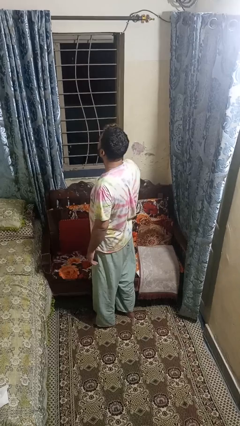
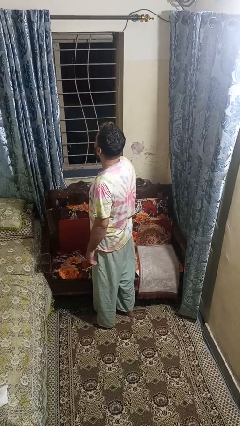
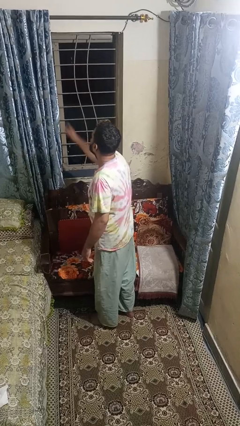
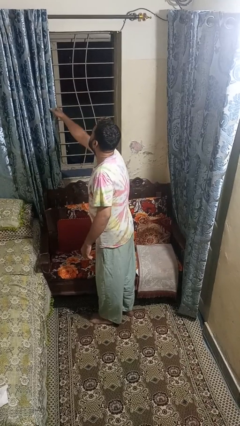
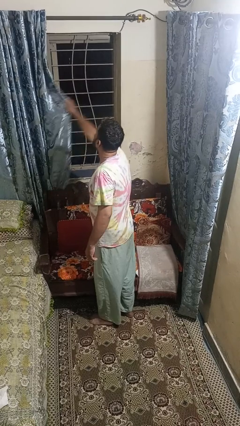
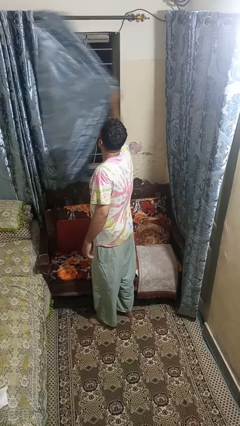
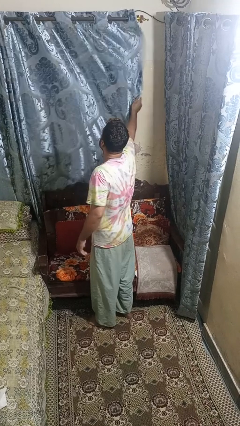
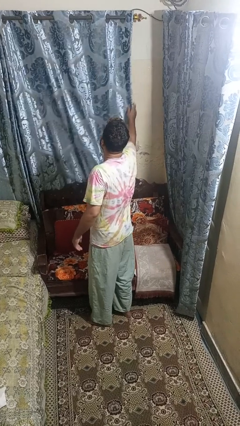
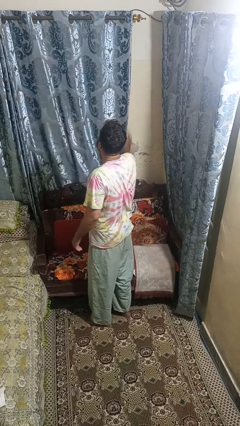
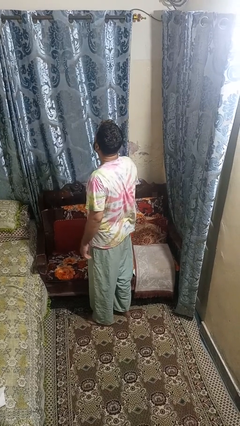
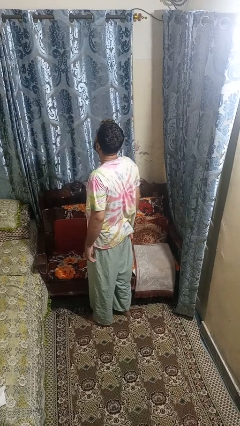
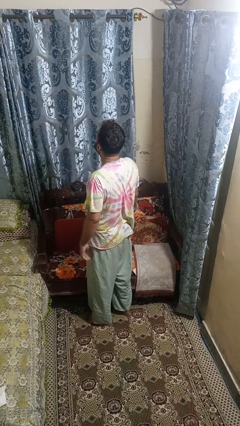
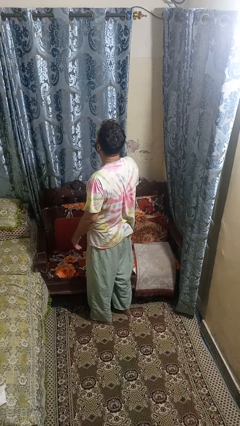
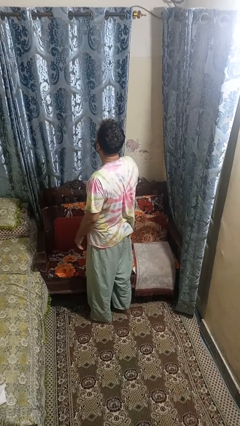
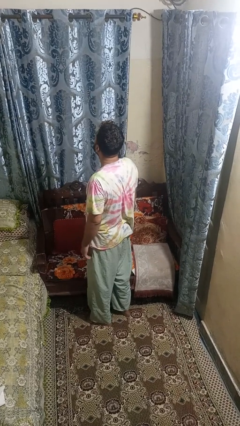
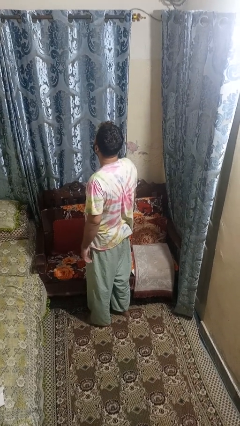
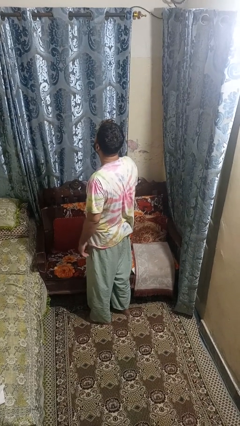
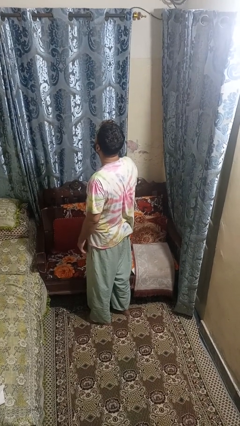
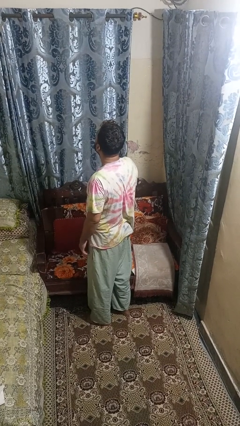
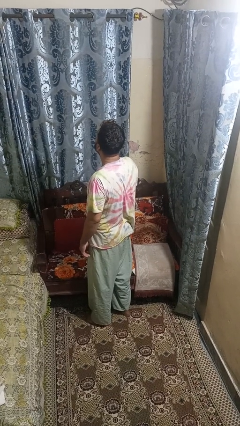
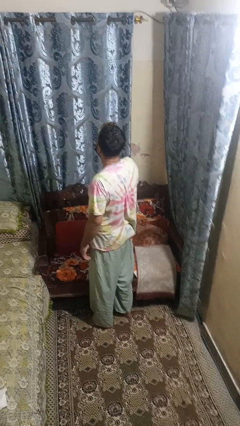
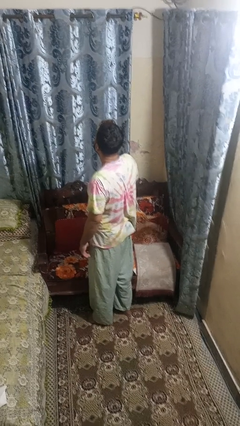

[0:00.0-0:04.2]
person closes curtains

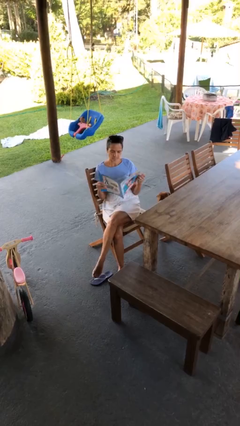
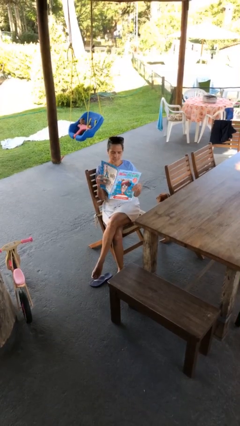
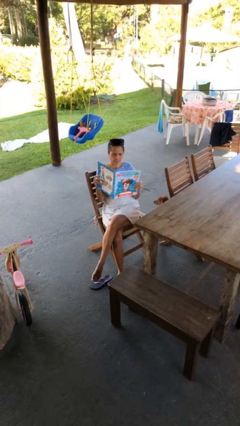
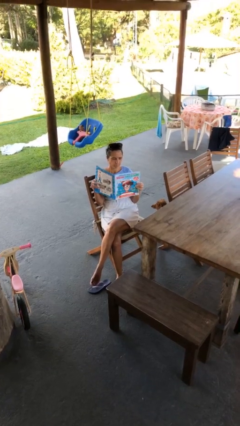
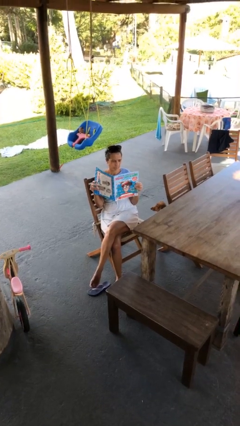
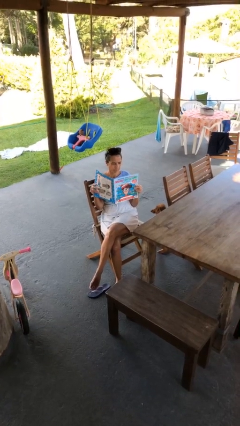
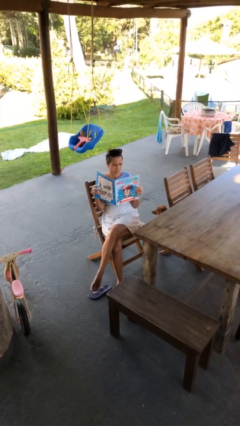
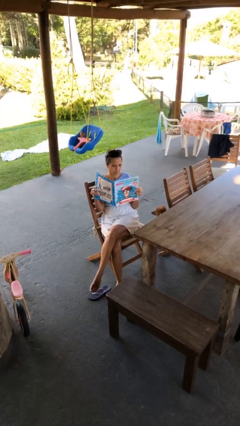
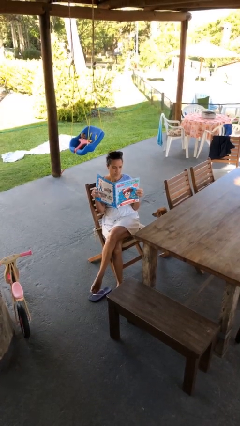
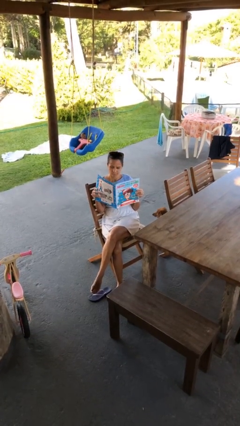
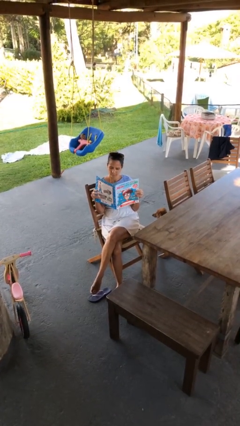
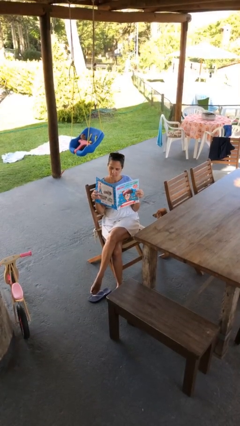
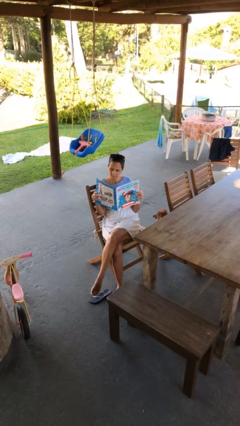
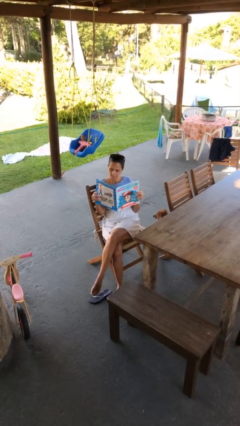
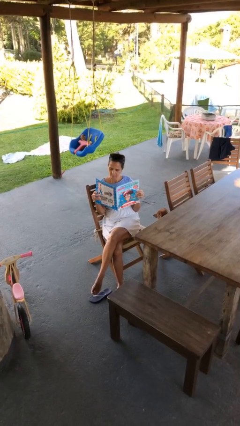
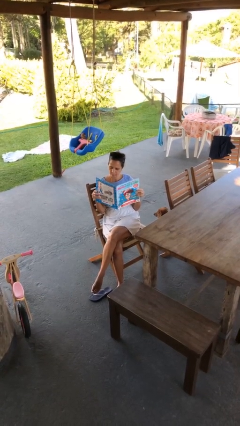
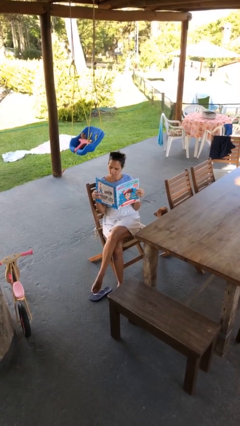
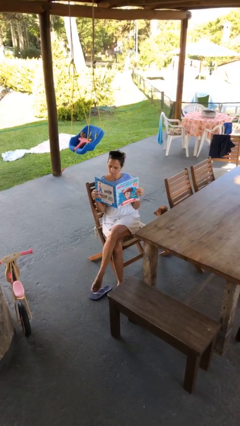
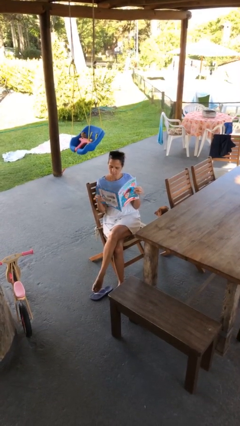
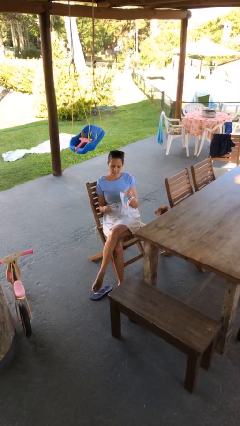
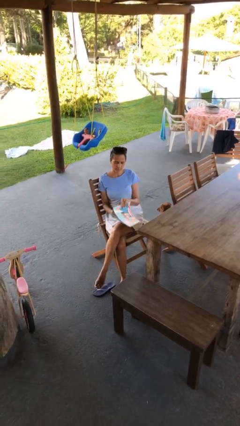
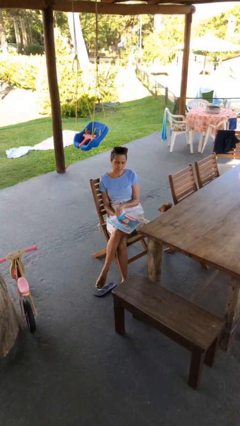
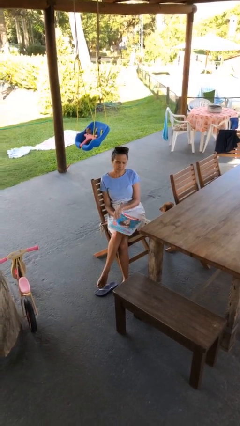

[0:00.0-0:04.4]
person reads document

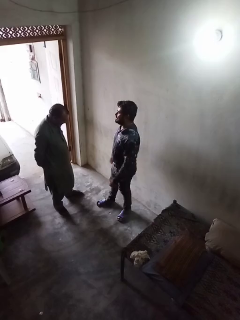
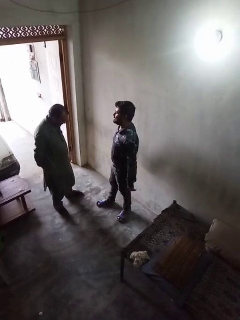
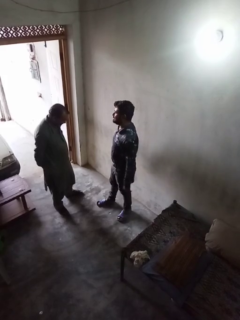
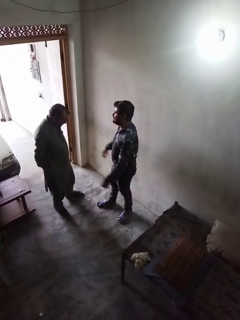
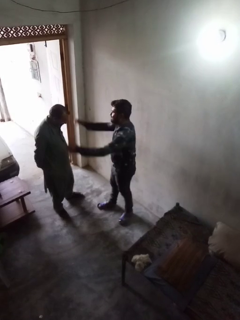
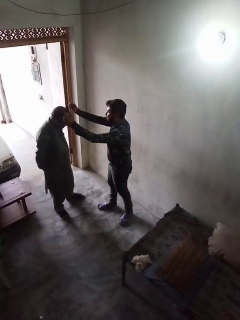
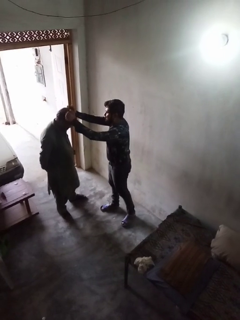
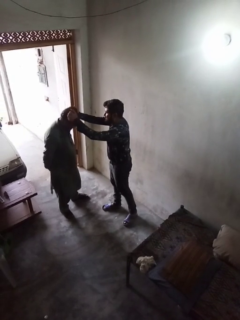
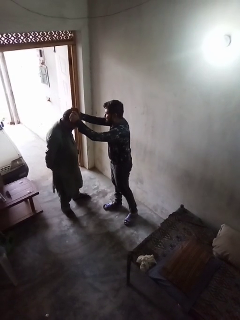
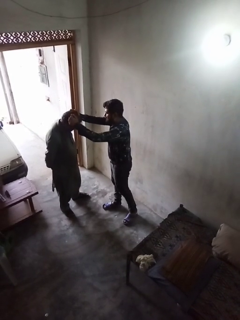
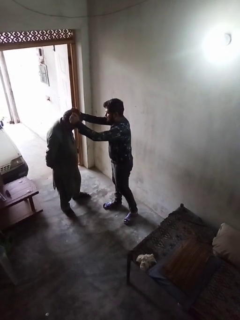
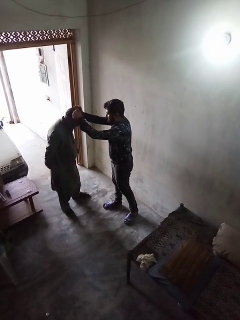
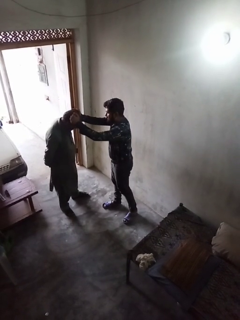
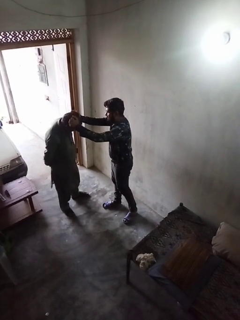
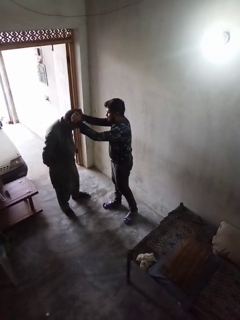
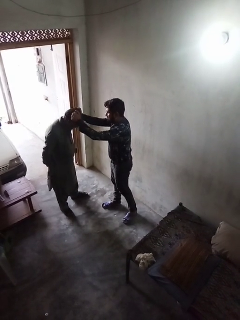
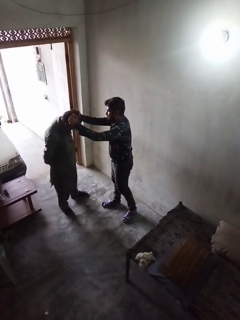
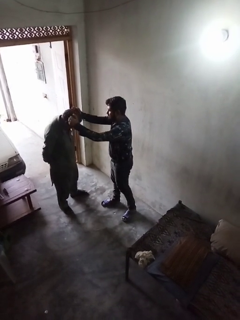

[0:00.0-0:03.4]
person grabs person by hair

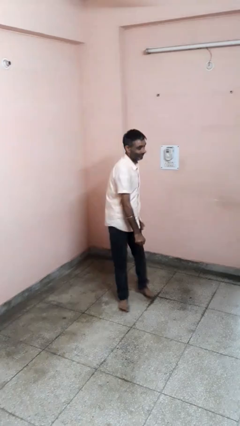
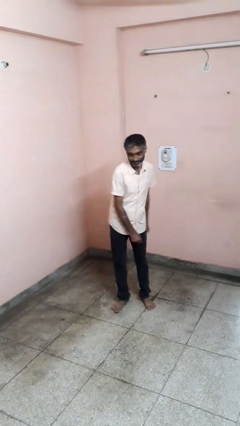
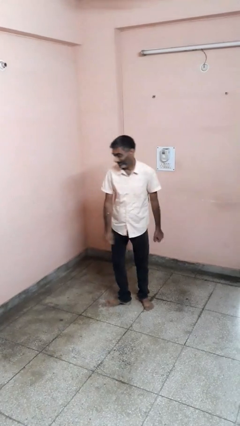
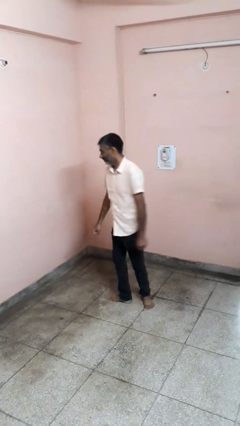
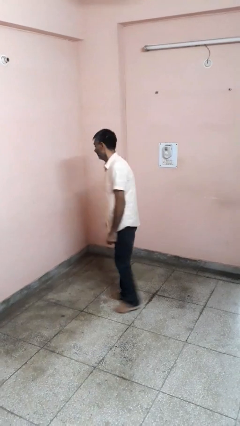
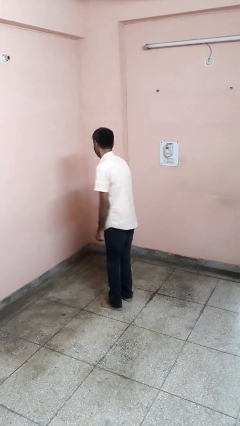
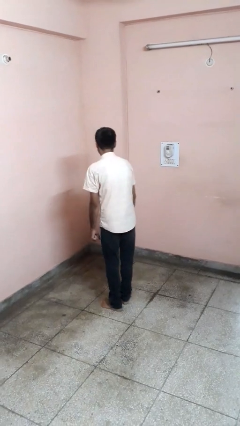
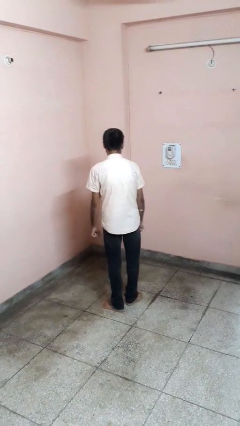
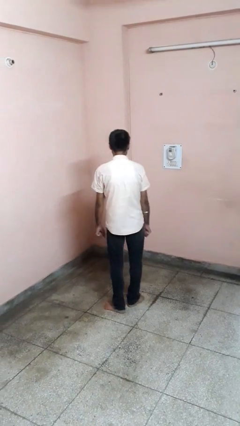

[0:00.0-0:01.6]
person twirls

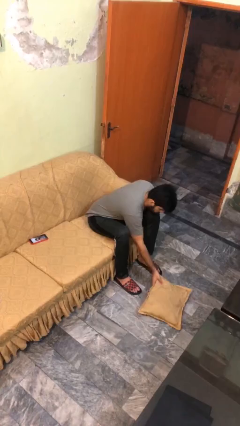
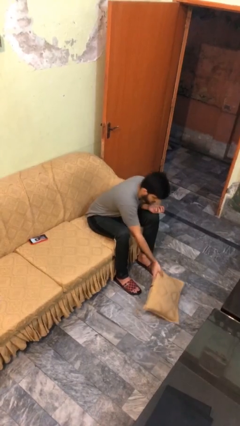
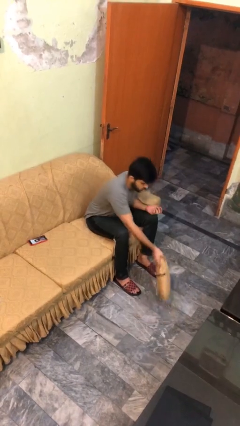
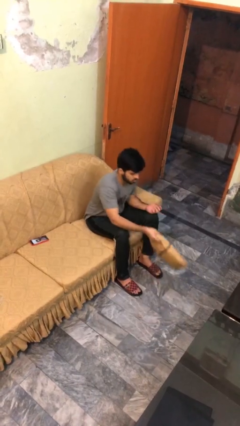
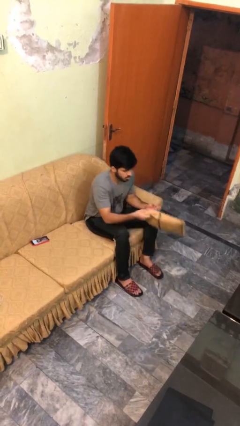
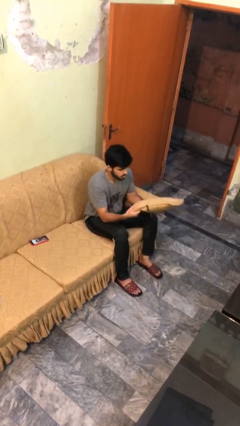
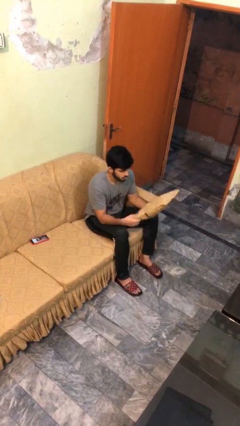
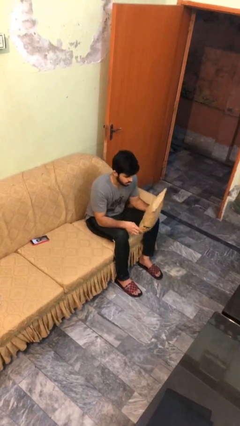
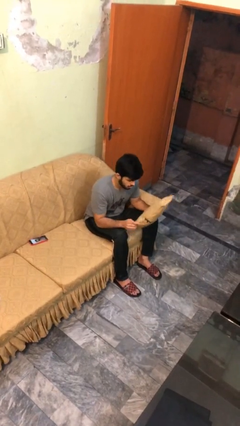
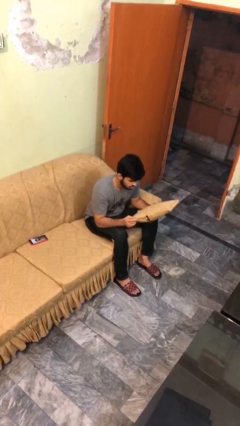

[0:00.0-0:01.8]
person picks up object from floor

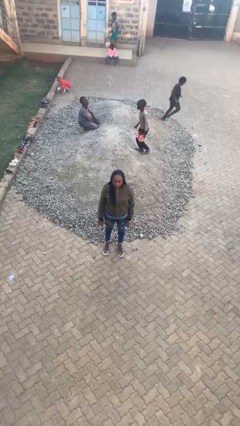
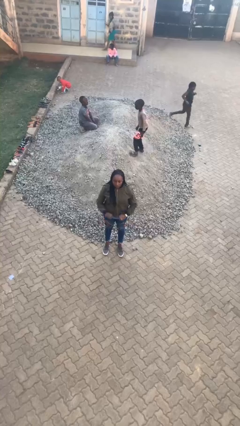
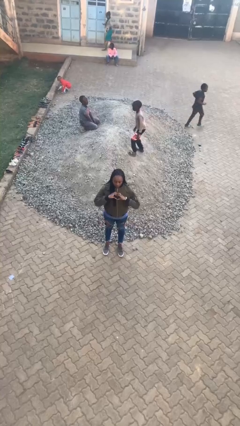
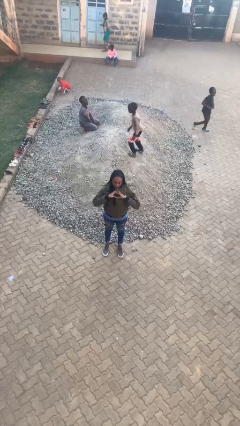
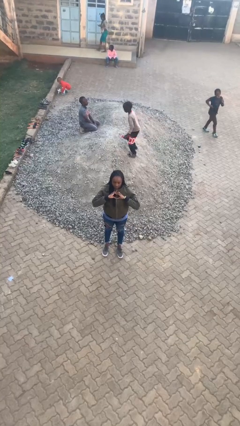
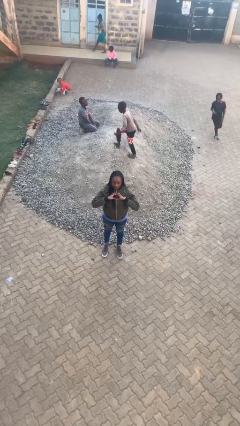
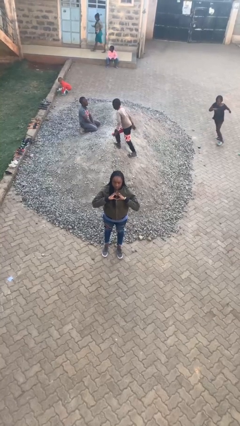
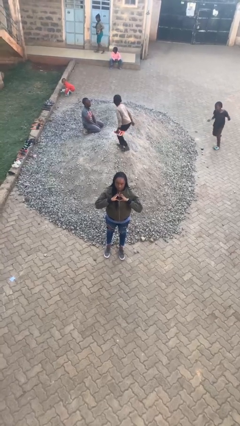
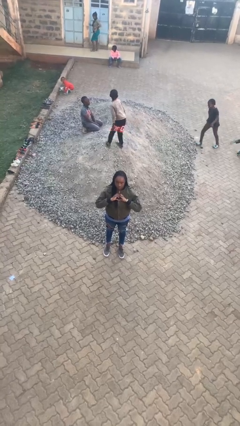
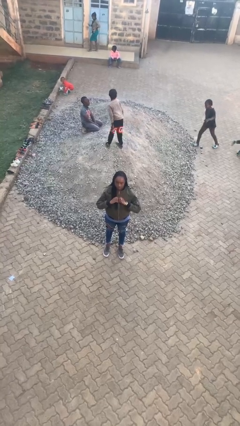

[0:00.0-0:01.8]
person gestures heart

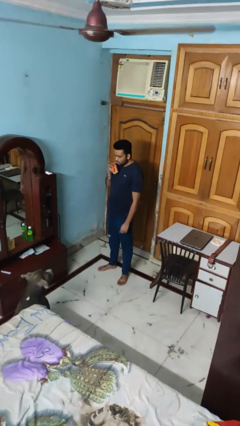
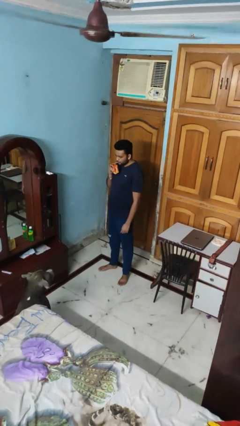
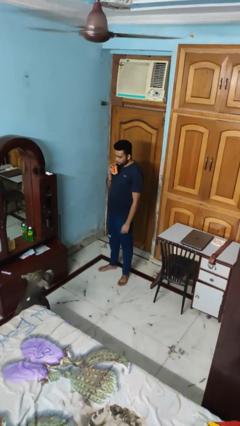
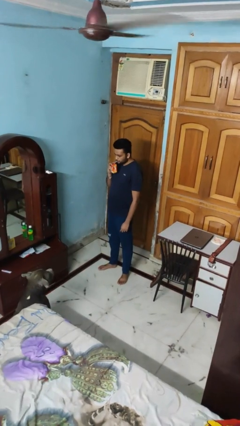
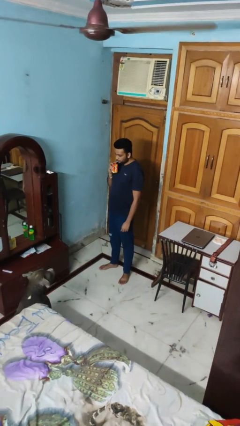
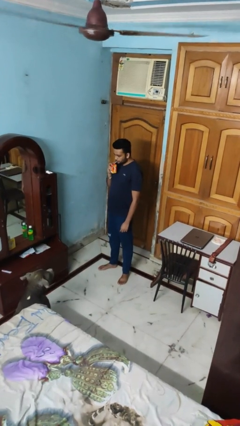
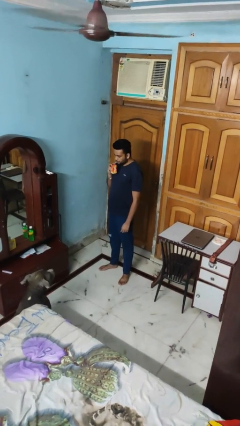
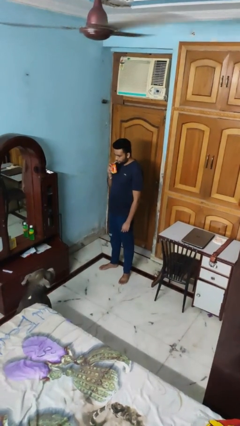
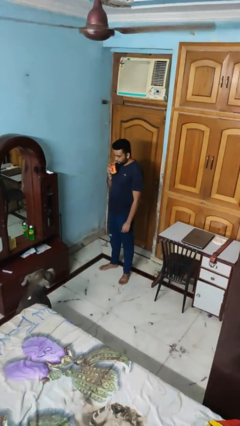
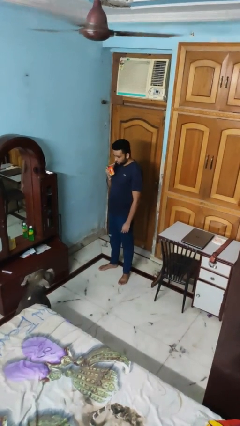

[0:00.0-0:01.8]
person drinks from straw
